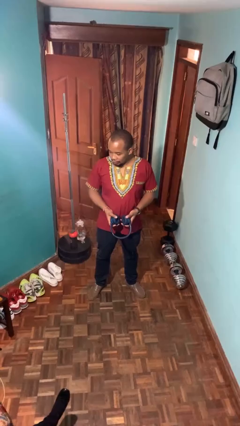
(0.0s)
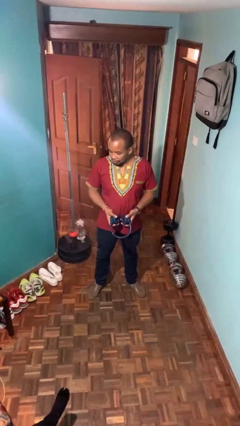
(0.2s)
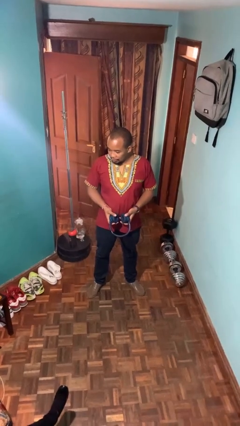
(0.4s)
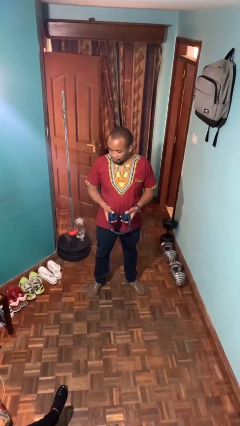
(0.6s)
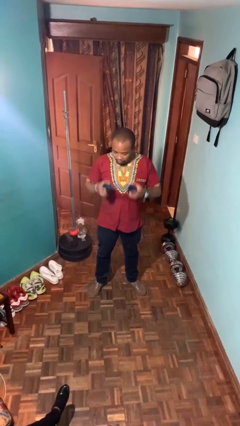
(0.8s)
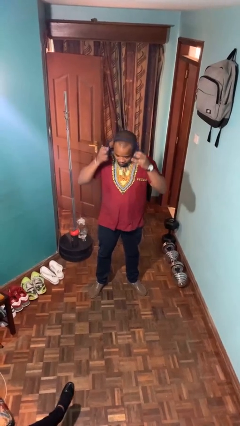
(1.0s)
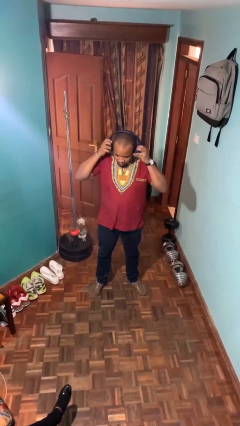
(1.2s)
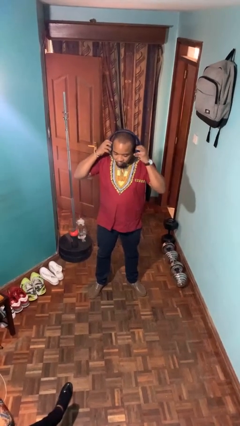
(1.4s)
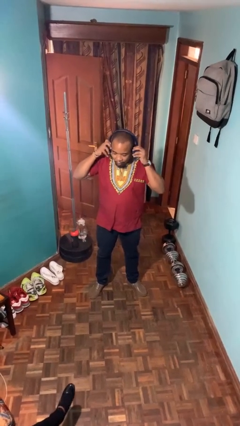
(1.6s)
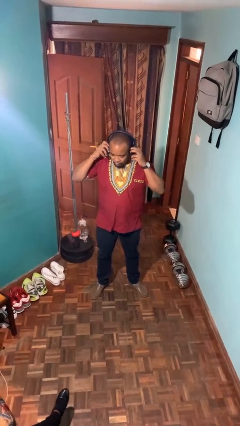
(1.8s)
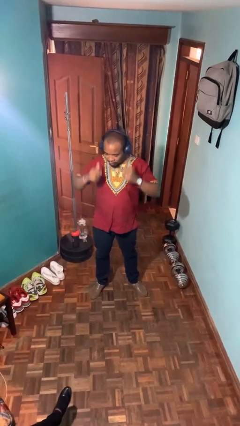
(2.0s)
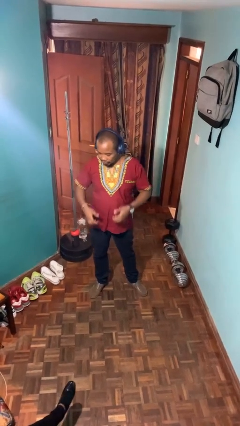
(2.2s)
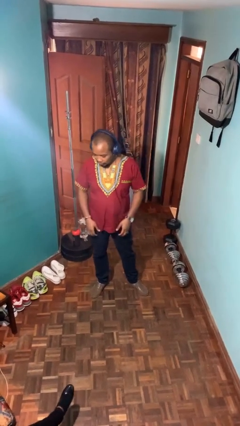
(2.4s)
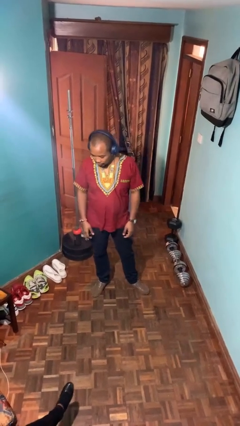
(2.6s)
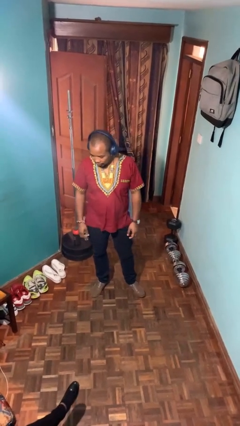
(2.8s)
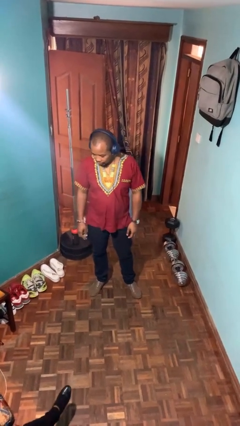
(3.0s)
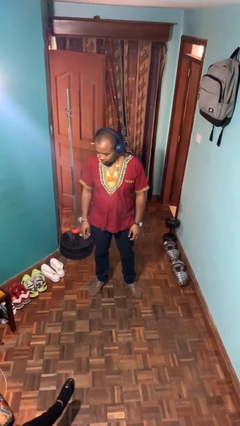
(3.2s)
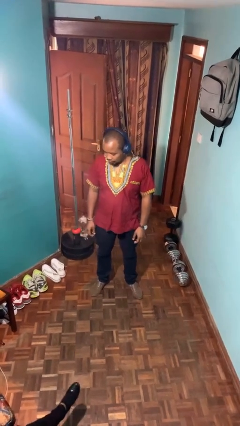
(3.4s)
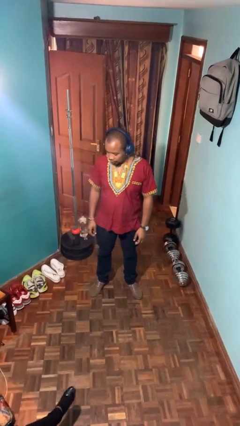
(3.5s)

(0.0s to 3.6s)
person puts on headphones

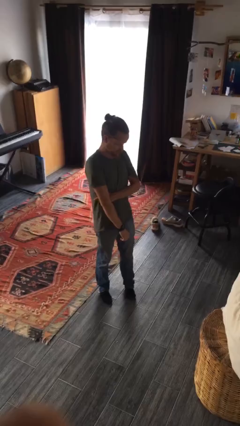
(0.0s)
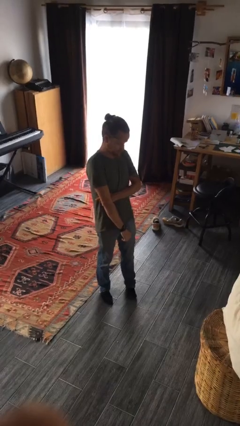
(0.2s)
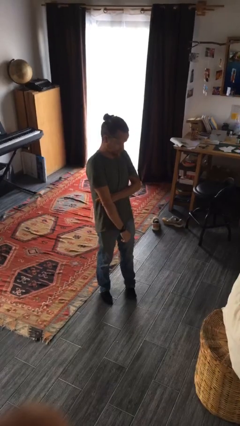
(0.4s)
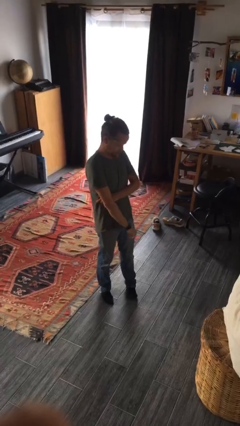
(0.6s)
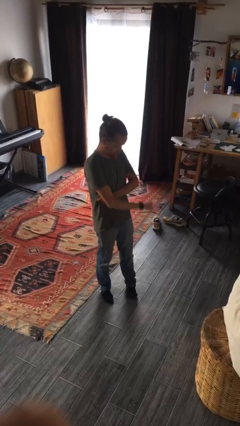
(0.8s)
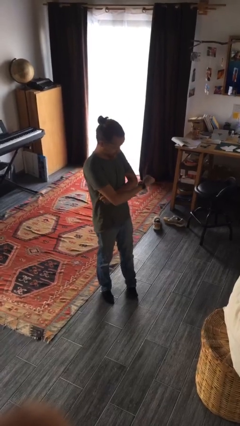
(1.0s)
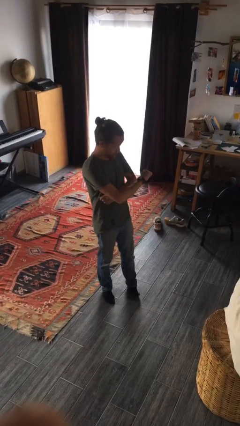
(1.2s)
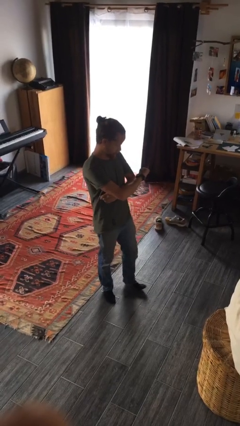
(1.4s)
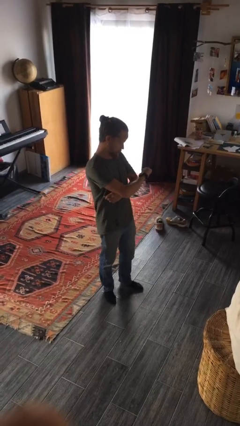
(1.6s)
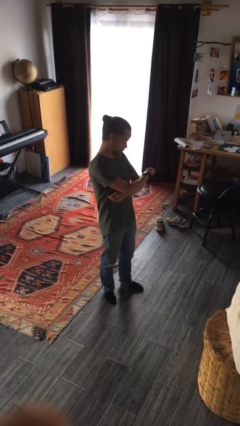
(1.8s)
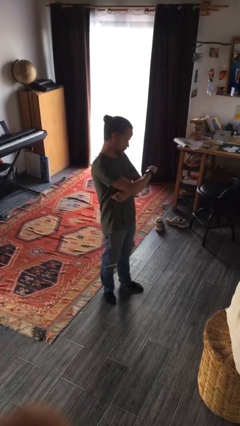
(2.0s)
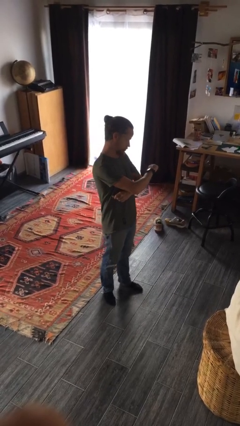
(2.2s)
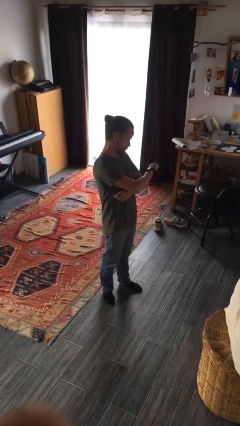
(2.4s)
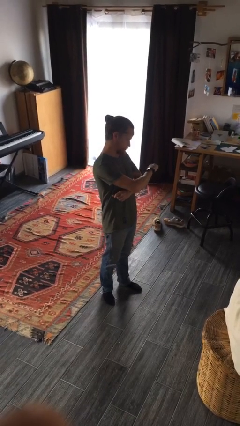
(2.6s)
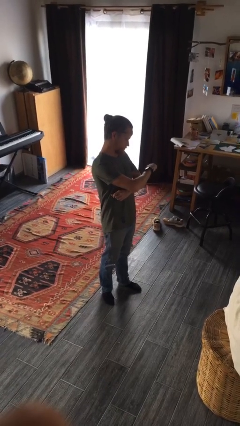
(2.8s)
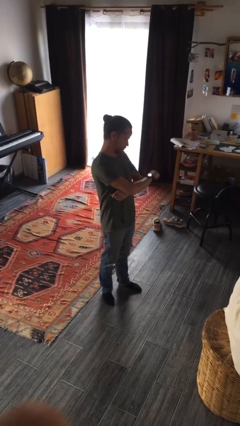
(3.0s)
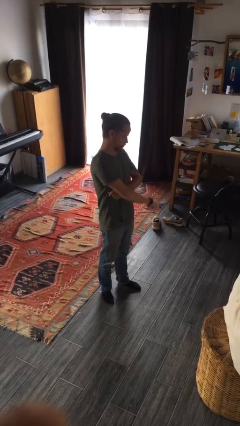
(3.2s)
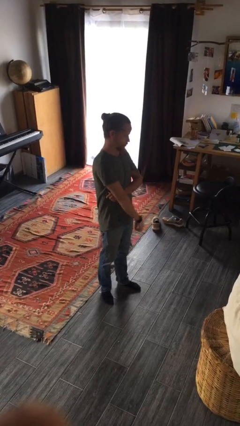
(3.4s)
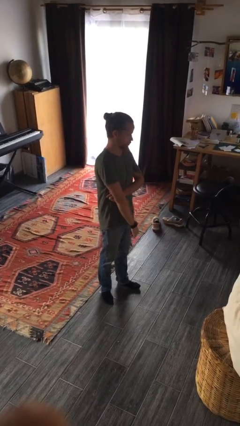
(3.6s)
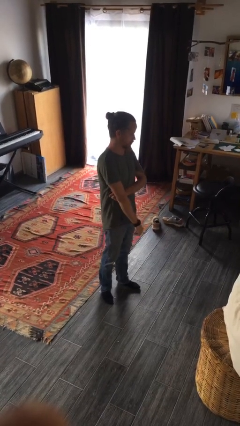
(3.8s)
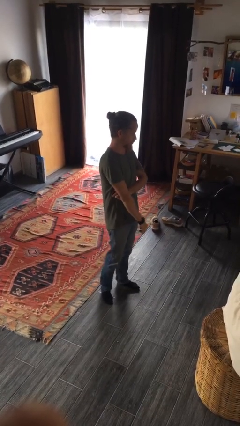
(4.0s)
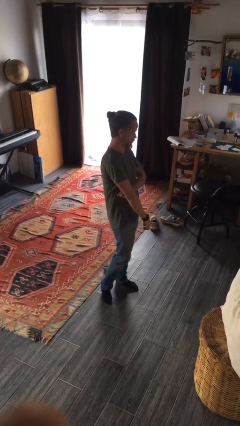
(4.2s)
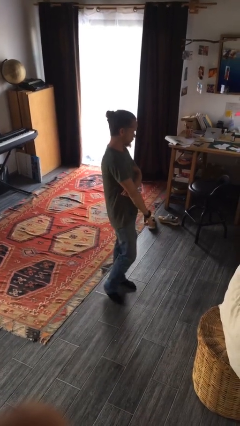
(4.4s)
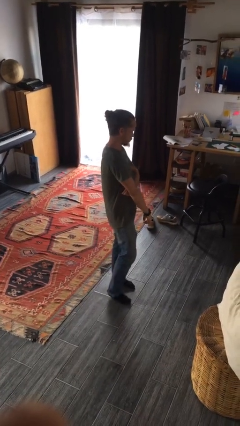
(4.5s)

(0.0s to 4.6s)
person looks at wristwatch

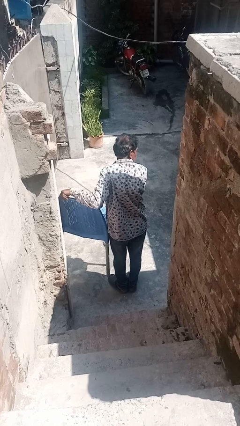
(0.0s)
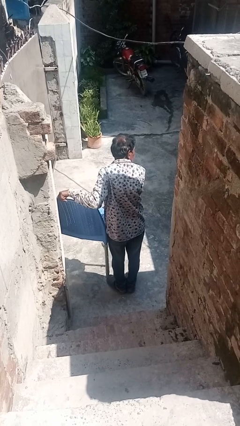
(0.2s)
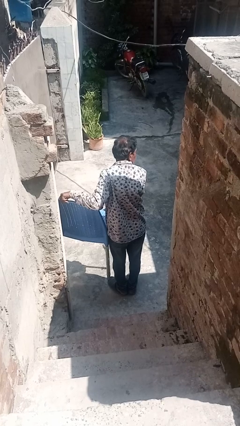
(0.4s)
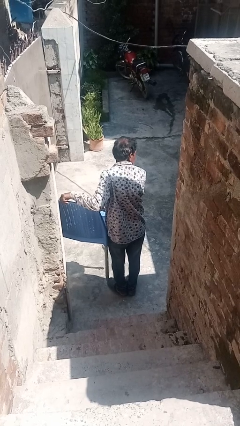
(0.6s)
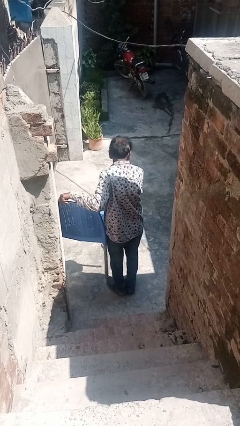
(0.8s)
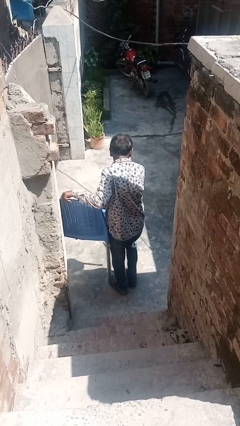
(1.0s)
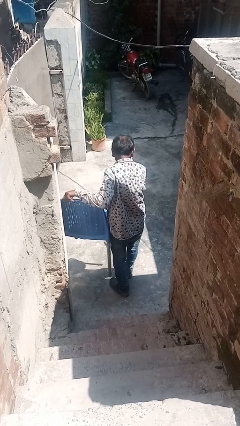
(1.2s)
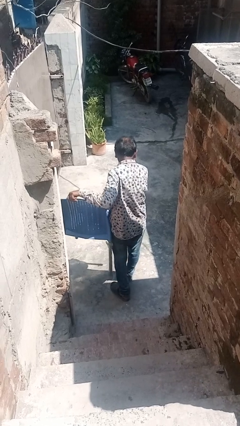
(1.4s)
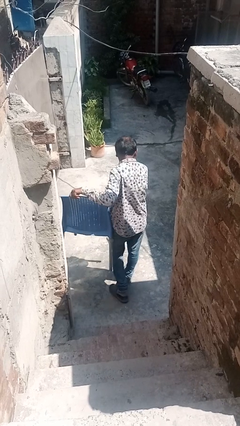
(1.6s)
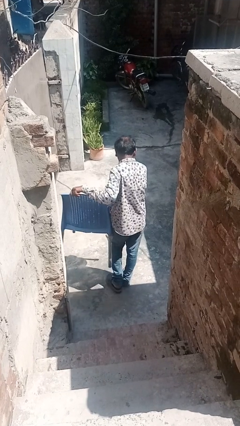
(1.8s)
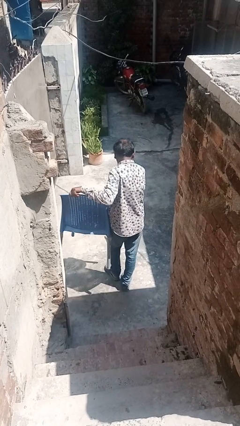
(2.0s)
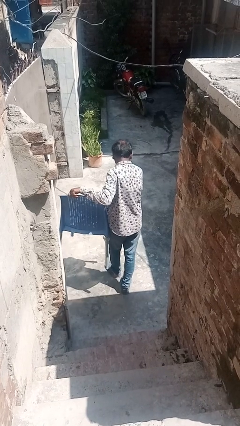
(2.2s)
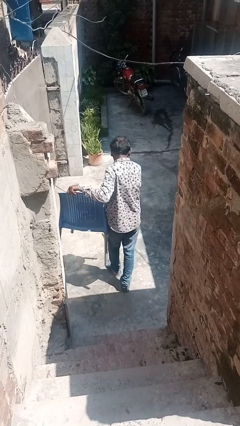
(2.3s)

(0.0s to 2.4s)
person carries furniture

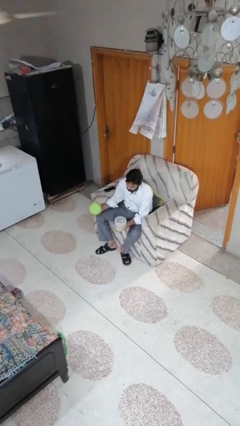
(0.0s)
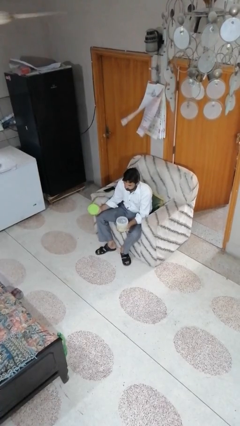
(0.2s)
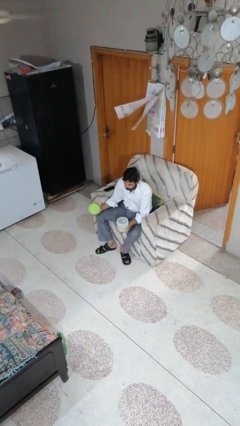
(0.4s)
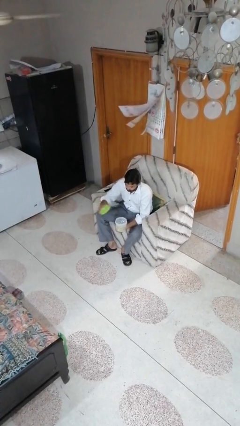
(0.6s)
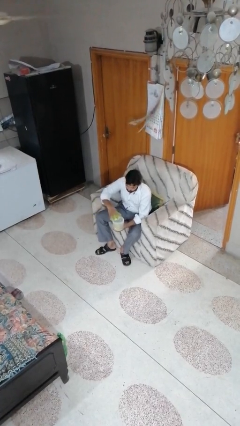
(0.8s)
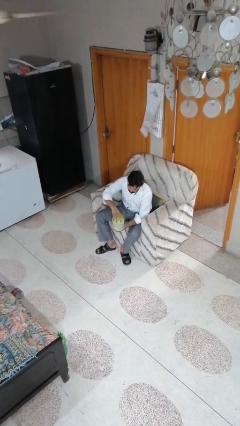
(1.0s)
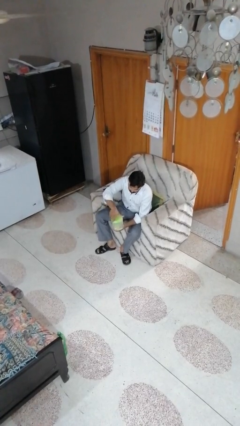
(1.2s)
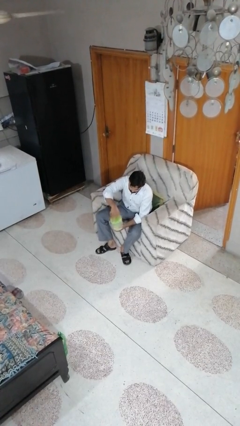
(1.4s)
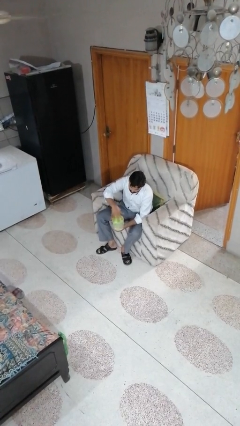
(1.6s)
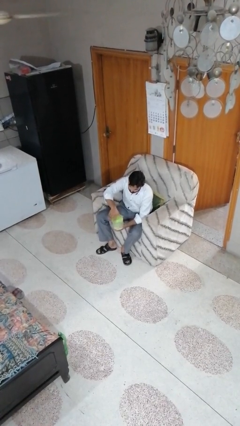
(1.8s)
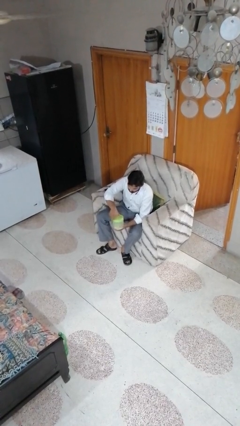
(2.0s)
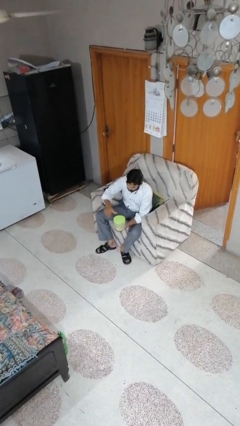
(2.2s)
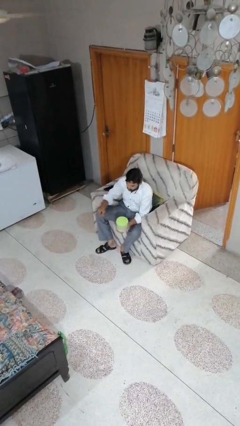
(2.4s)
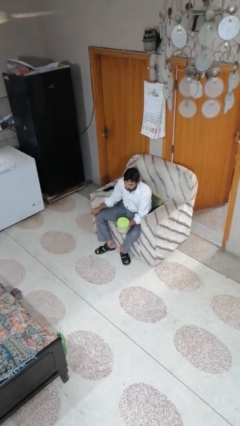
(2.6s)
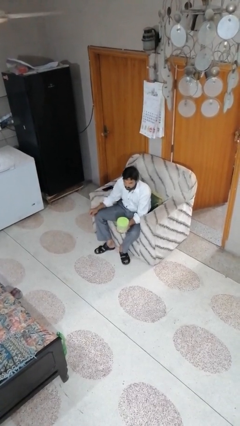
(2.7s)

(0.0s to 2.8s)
person closes jar

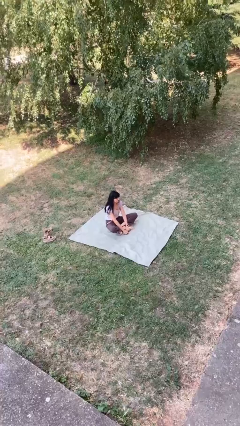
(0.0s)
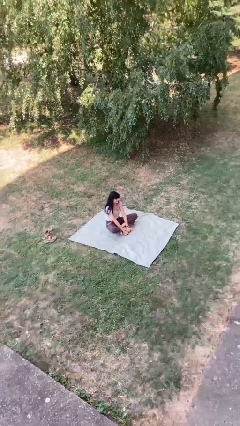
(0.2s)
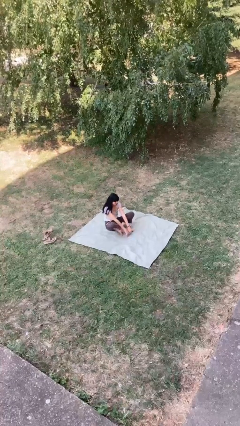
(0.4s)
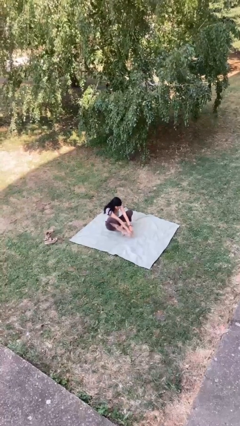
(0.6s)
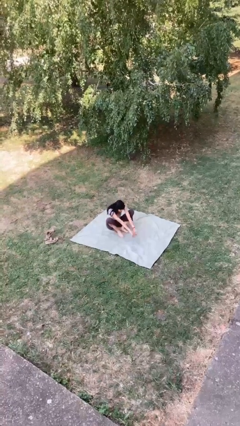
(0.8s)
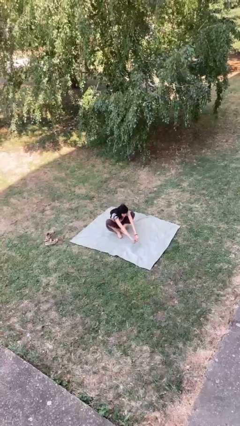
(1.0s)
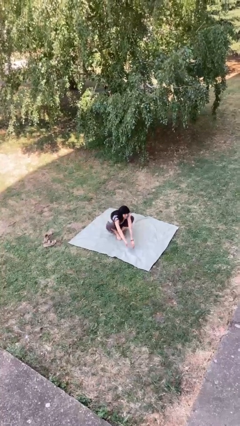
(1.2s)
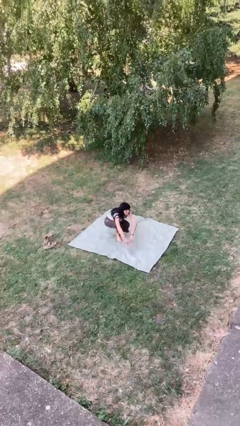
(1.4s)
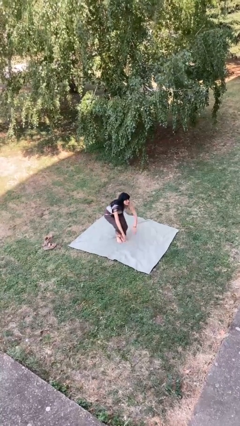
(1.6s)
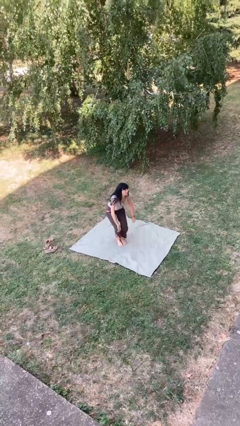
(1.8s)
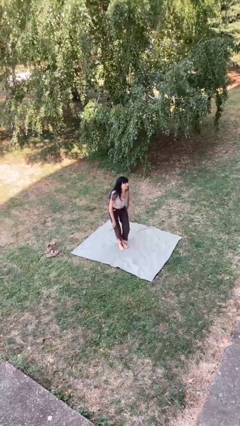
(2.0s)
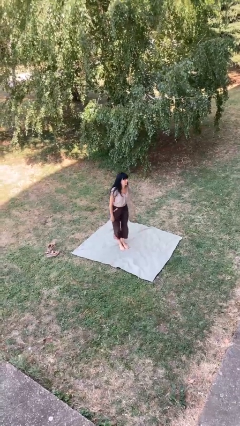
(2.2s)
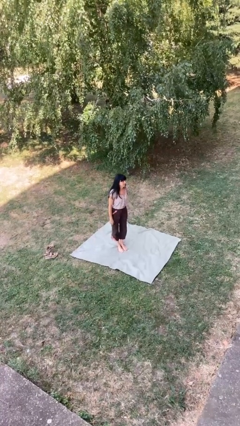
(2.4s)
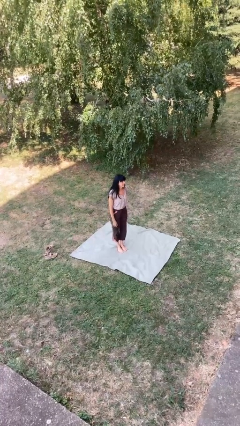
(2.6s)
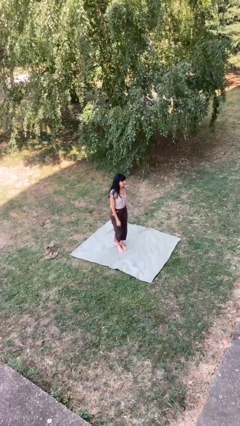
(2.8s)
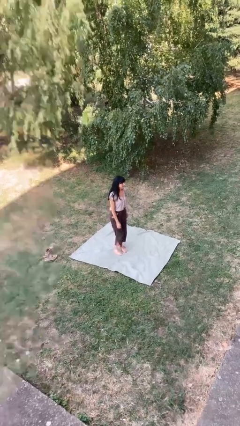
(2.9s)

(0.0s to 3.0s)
person stands up from floor

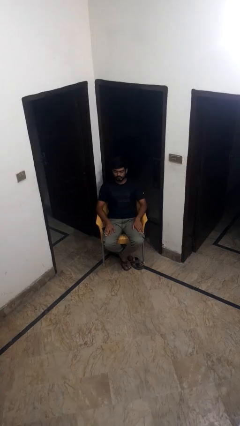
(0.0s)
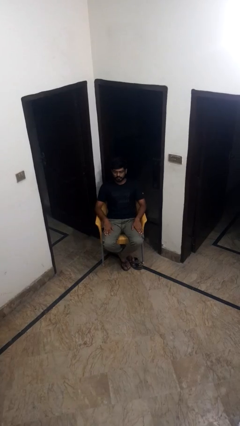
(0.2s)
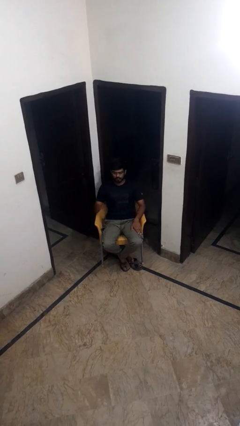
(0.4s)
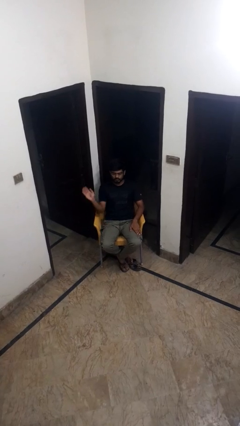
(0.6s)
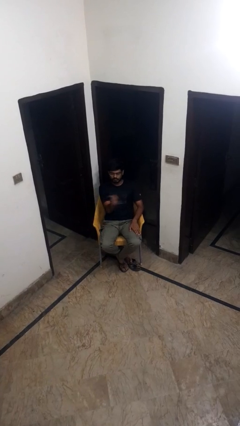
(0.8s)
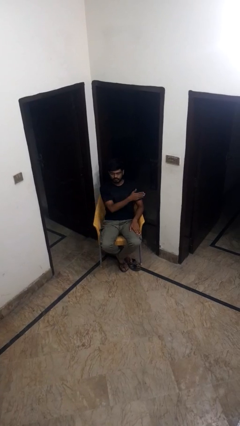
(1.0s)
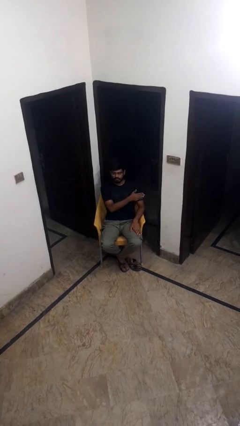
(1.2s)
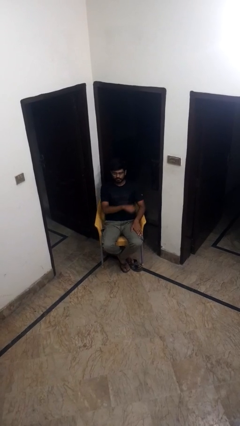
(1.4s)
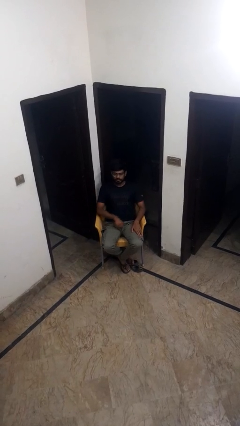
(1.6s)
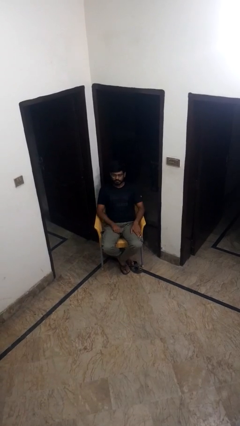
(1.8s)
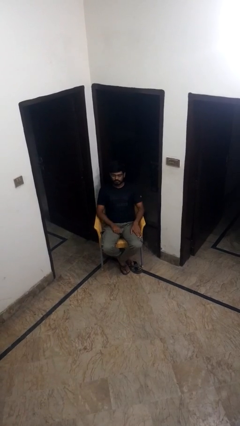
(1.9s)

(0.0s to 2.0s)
person gestures swipe left
